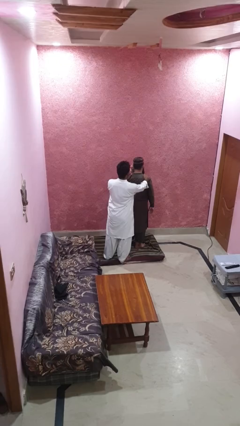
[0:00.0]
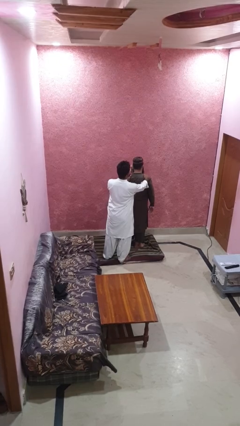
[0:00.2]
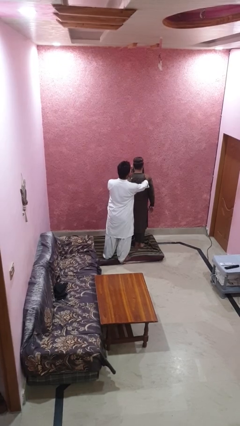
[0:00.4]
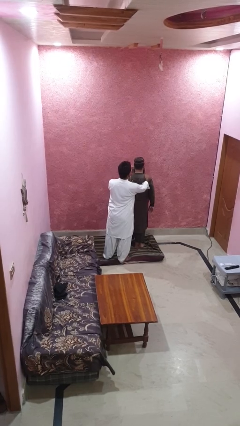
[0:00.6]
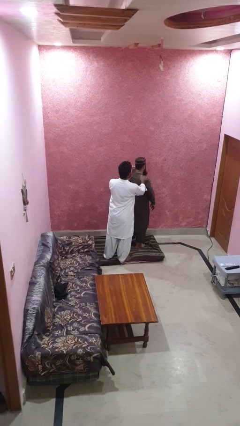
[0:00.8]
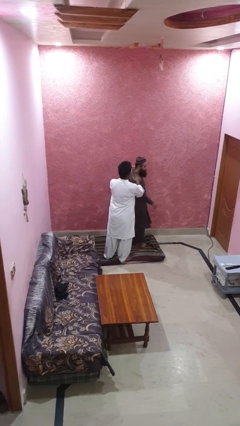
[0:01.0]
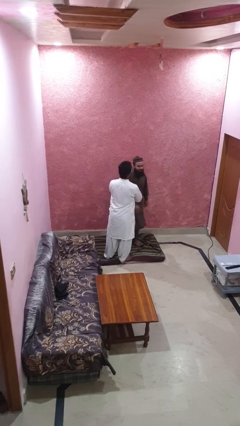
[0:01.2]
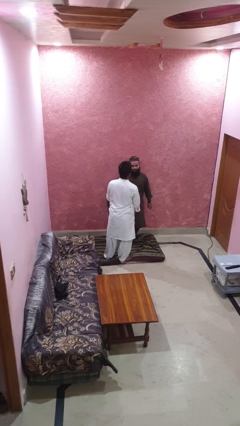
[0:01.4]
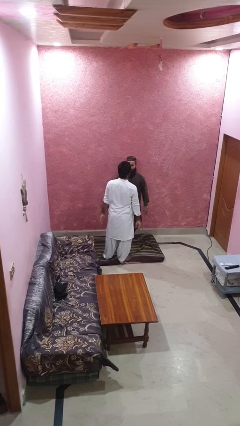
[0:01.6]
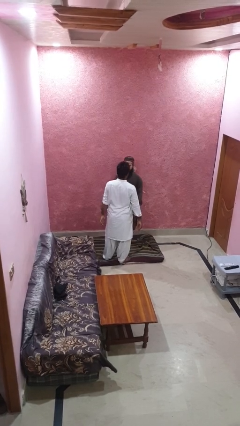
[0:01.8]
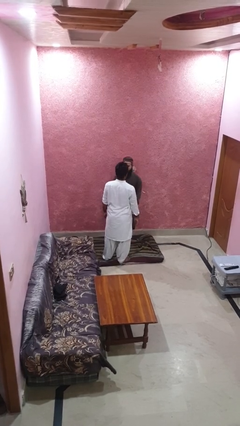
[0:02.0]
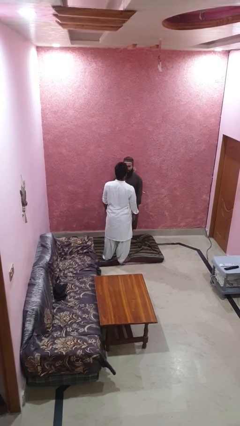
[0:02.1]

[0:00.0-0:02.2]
person spins person around

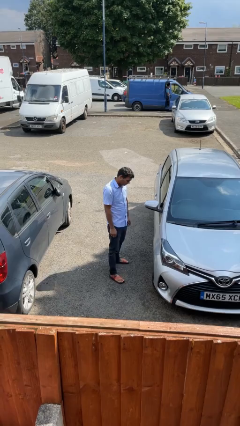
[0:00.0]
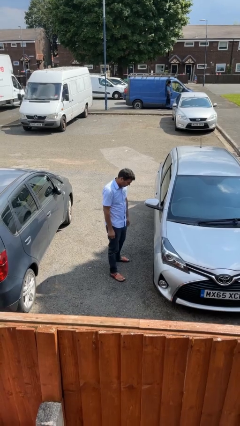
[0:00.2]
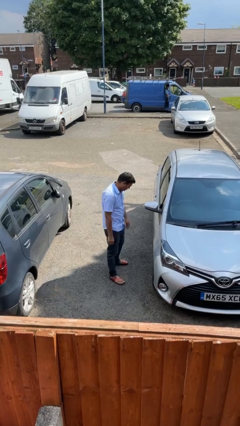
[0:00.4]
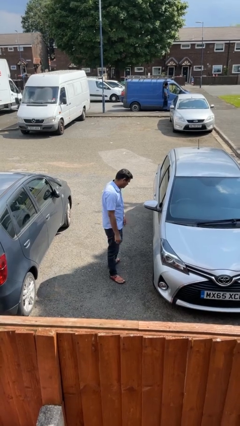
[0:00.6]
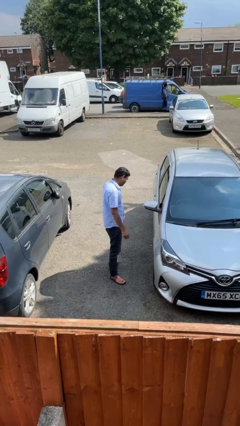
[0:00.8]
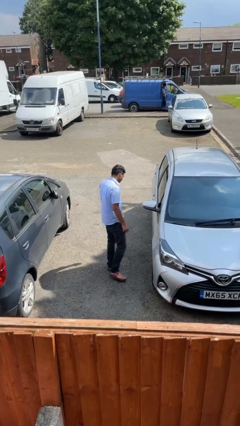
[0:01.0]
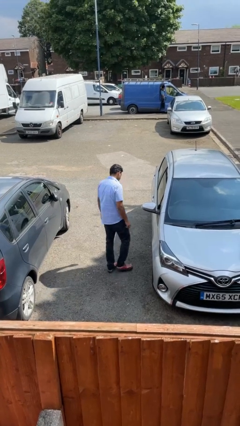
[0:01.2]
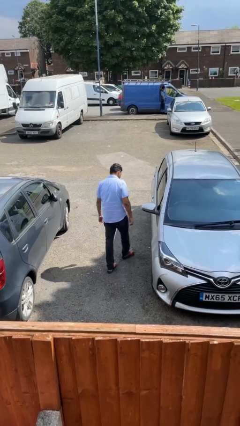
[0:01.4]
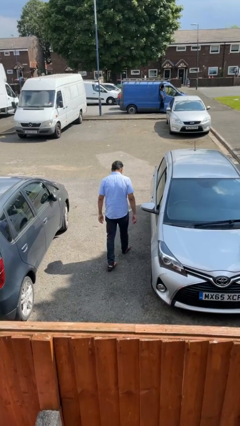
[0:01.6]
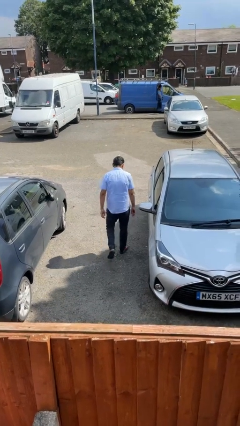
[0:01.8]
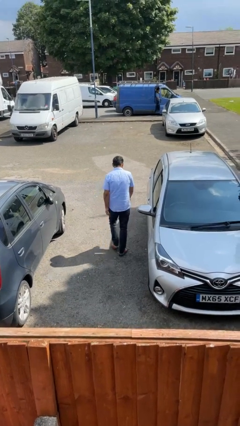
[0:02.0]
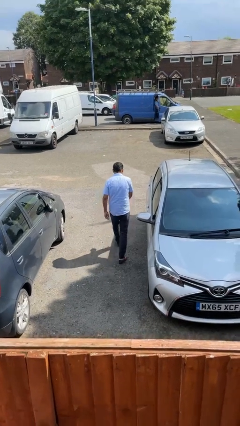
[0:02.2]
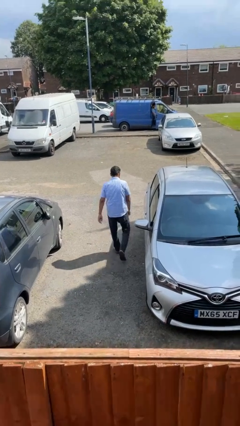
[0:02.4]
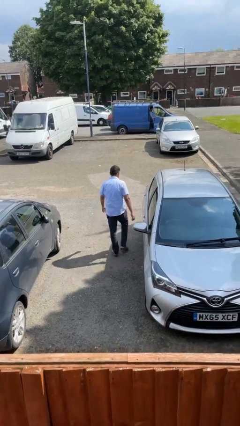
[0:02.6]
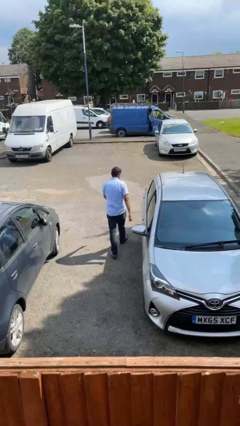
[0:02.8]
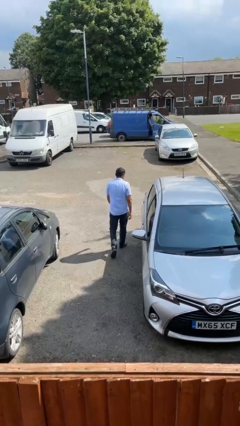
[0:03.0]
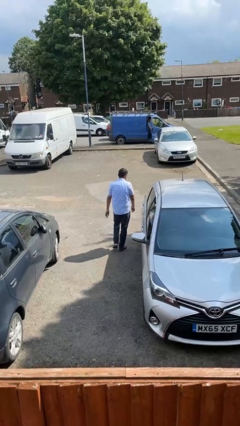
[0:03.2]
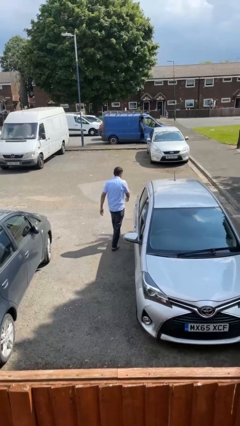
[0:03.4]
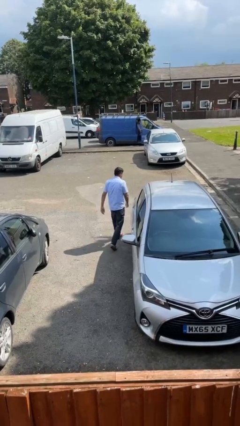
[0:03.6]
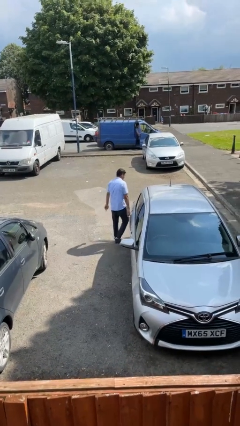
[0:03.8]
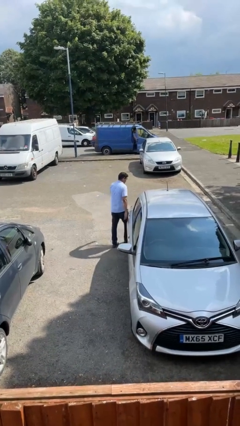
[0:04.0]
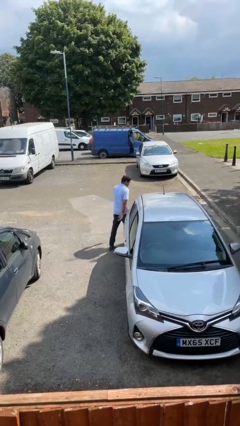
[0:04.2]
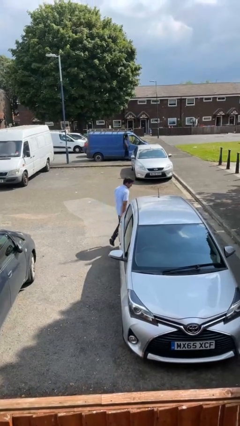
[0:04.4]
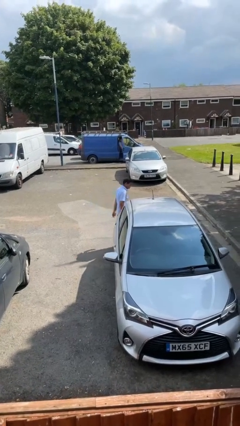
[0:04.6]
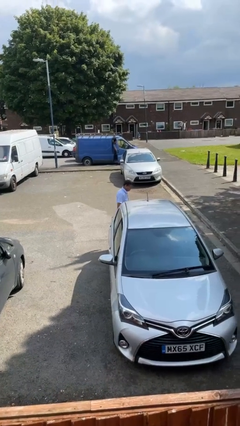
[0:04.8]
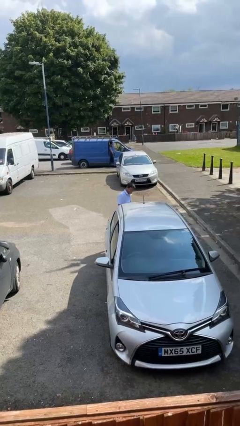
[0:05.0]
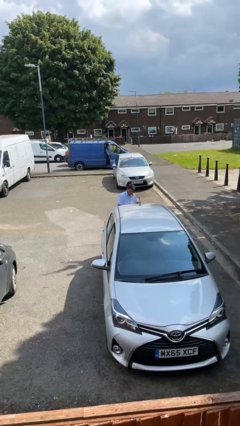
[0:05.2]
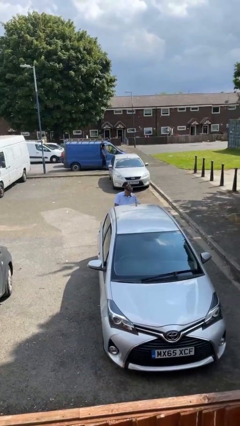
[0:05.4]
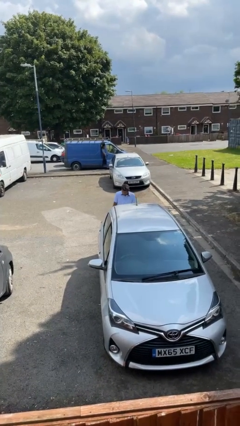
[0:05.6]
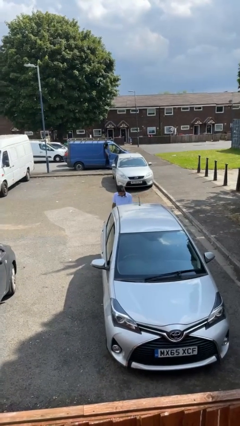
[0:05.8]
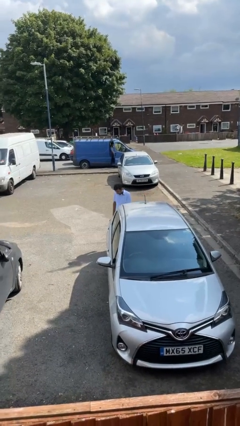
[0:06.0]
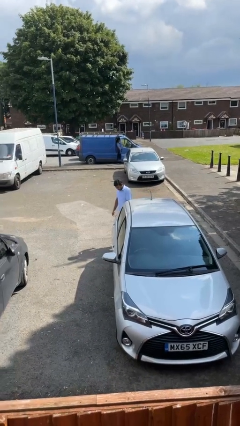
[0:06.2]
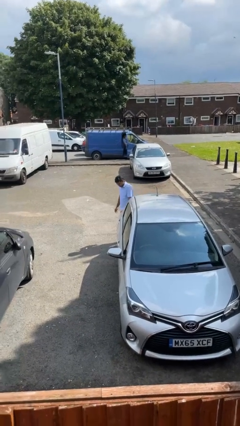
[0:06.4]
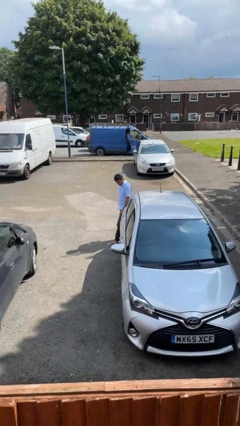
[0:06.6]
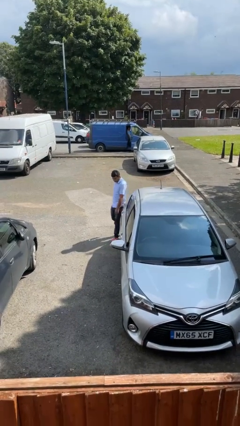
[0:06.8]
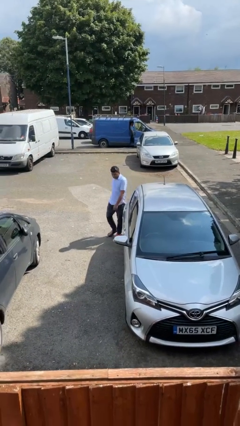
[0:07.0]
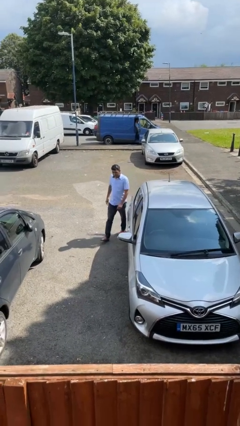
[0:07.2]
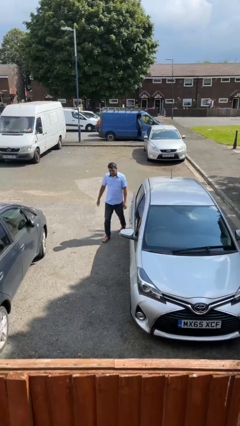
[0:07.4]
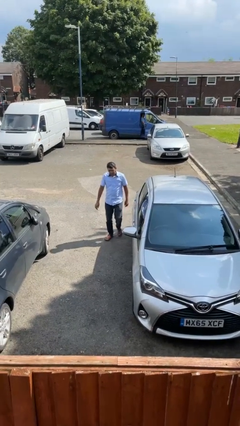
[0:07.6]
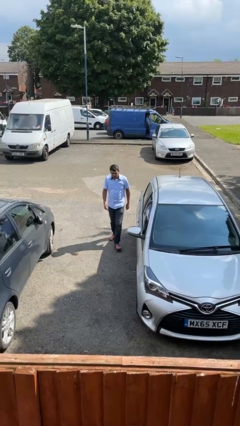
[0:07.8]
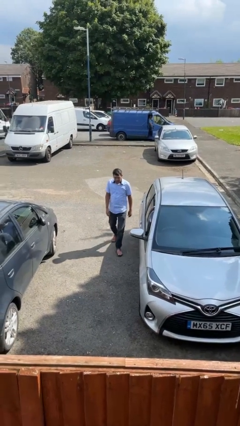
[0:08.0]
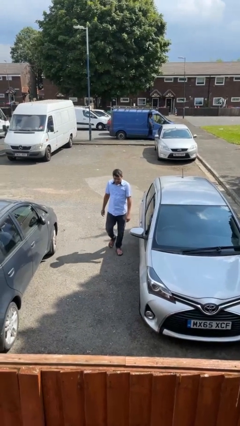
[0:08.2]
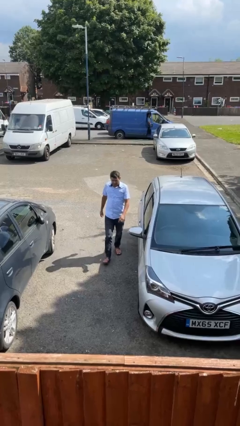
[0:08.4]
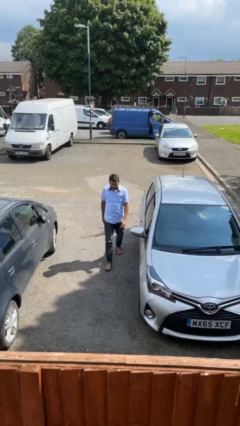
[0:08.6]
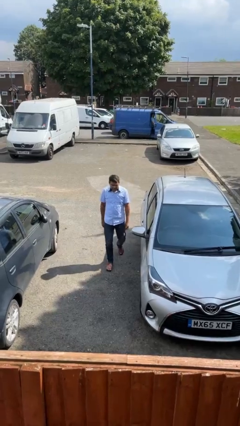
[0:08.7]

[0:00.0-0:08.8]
person walks around car

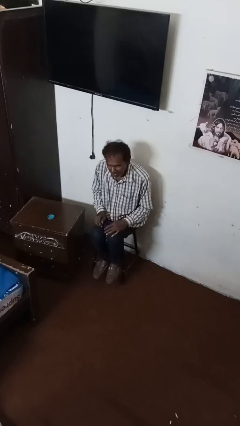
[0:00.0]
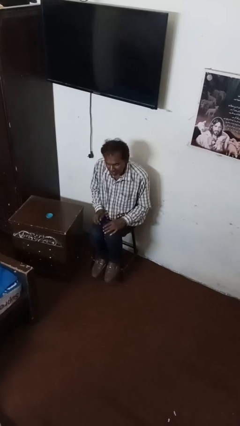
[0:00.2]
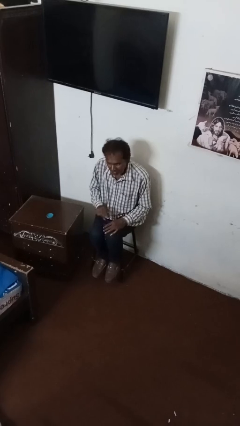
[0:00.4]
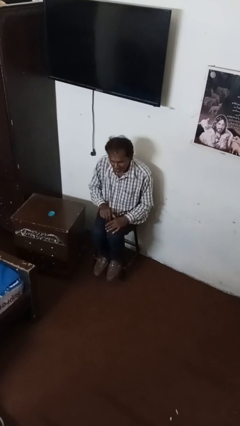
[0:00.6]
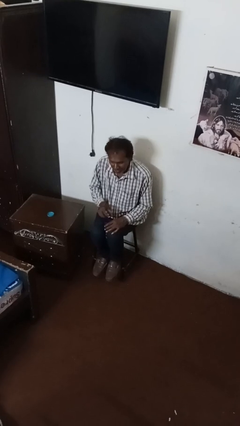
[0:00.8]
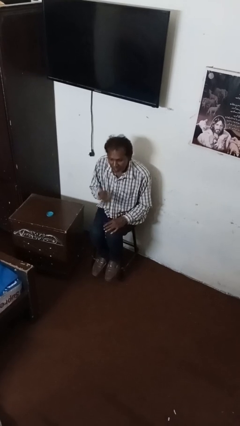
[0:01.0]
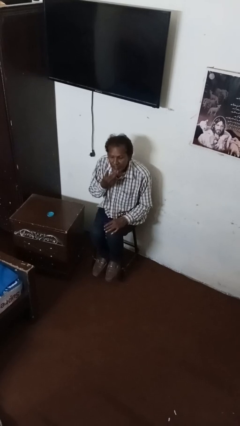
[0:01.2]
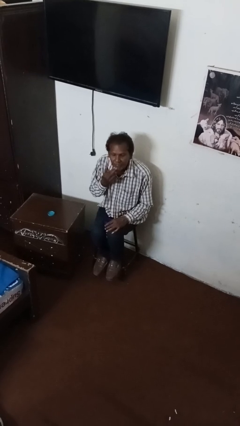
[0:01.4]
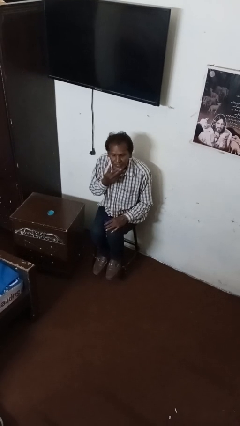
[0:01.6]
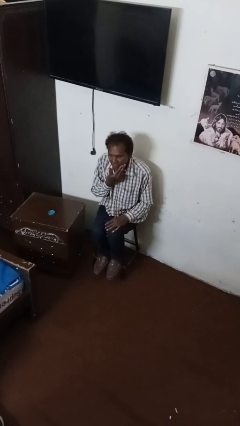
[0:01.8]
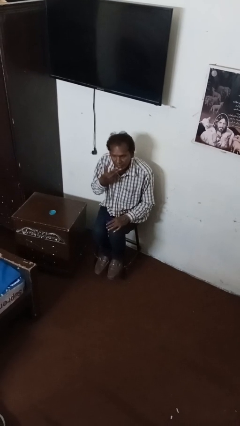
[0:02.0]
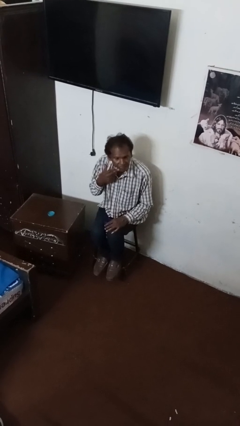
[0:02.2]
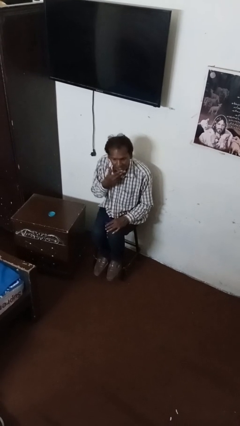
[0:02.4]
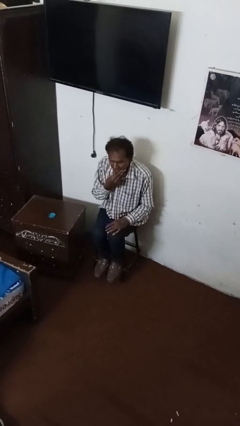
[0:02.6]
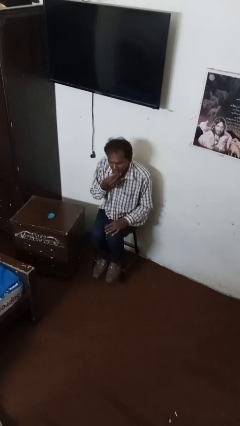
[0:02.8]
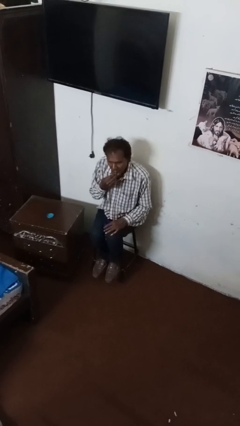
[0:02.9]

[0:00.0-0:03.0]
person strokes chin

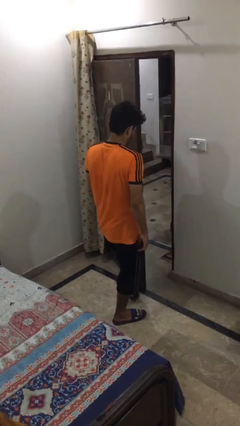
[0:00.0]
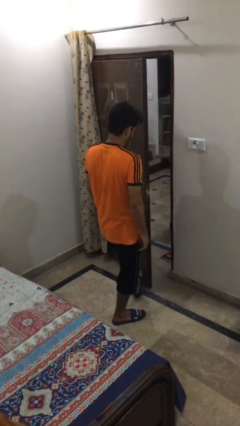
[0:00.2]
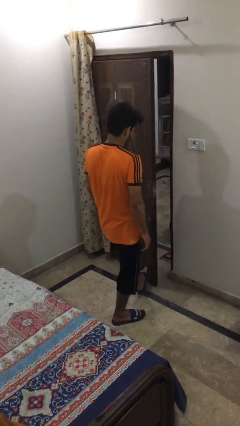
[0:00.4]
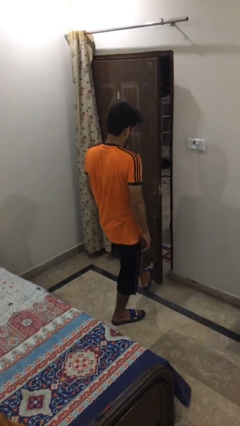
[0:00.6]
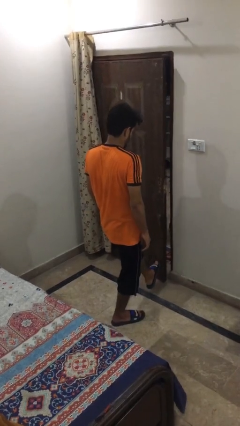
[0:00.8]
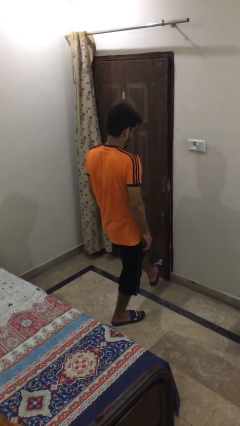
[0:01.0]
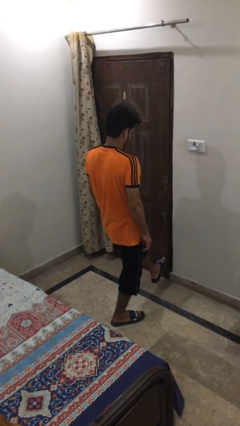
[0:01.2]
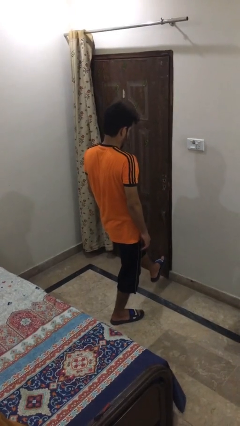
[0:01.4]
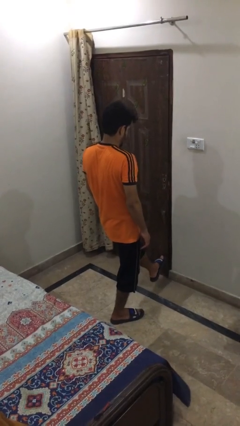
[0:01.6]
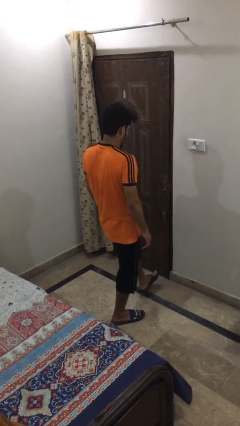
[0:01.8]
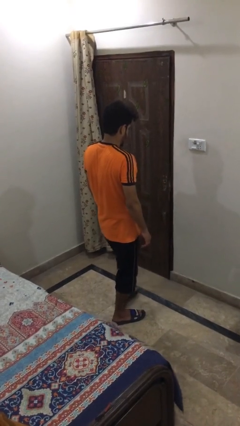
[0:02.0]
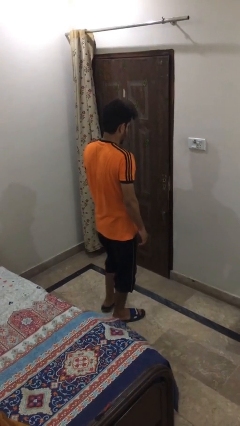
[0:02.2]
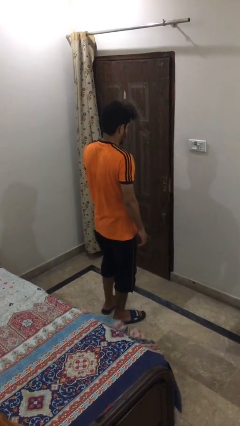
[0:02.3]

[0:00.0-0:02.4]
person closes door with foot

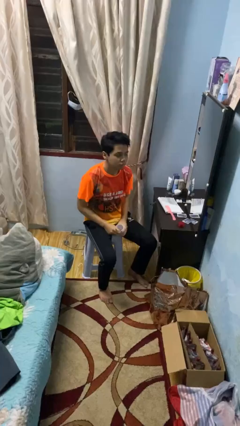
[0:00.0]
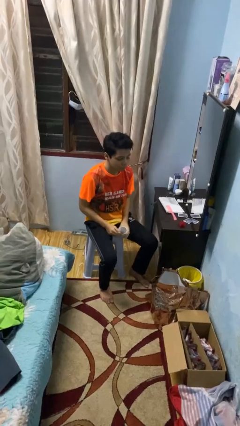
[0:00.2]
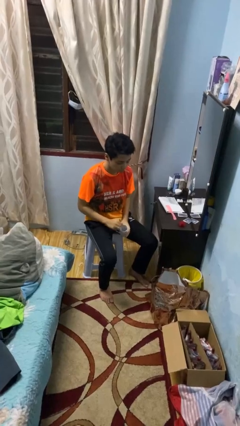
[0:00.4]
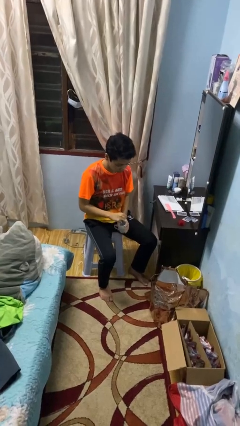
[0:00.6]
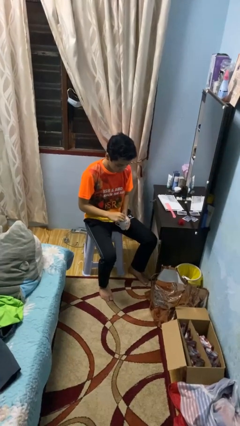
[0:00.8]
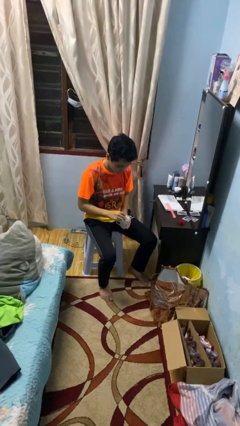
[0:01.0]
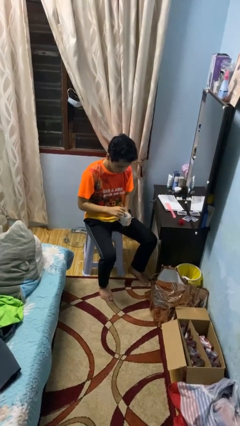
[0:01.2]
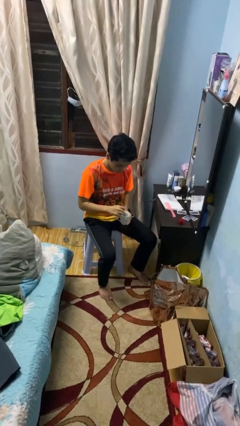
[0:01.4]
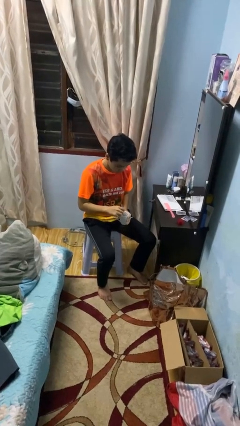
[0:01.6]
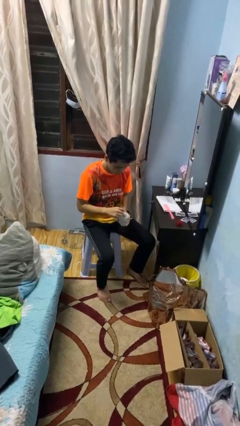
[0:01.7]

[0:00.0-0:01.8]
person stirs mug
